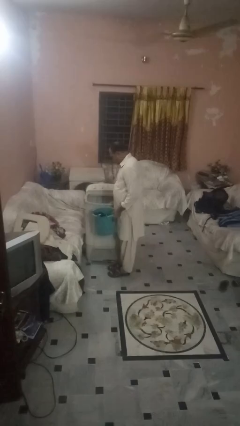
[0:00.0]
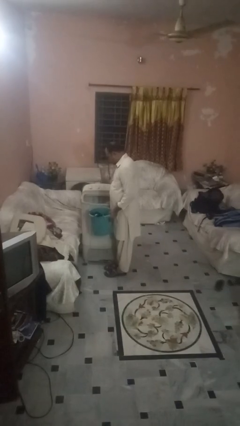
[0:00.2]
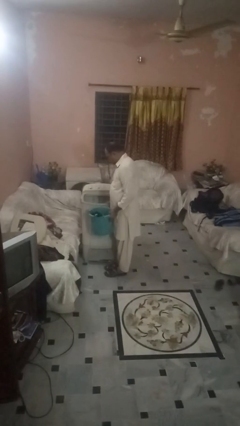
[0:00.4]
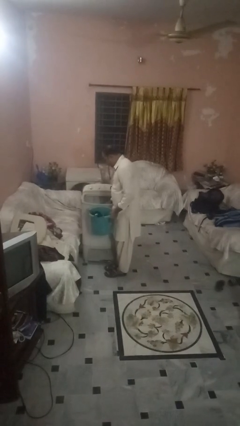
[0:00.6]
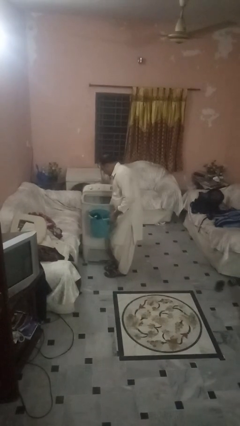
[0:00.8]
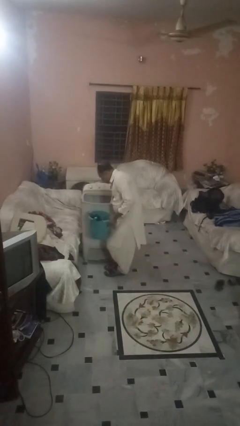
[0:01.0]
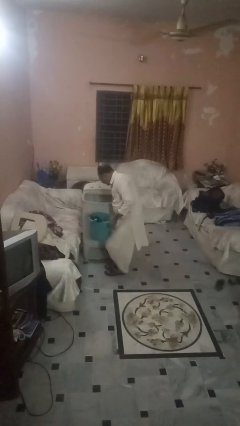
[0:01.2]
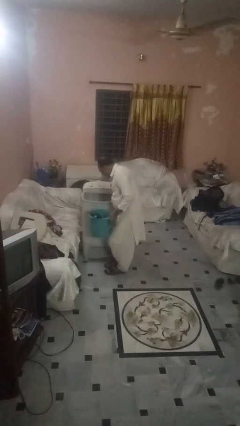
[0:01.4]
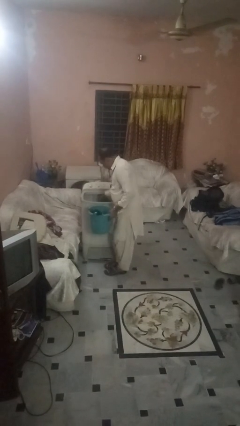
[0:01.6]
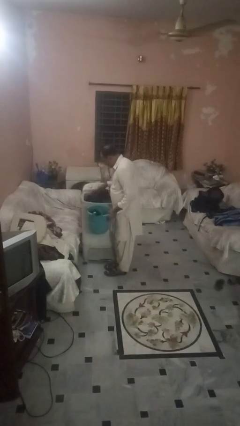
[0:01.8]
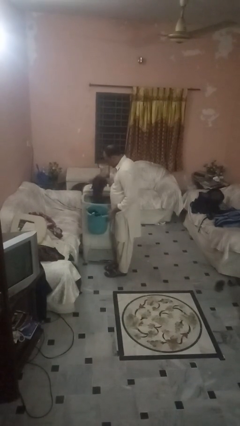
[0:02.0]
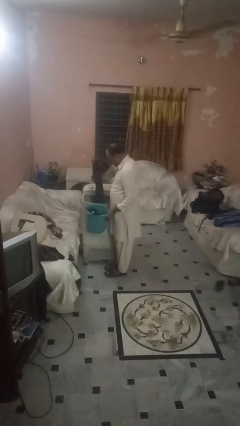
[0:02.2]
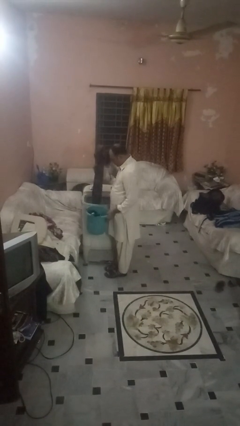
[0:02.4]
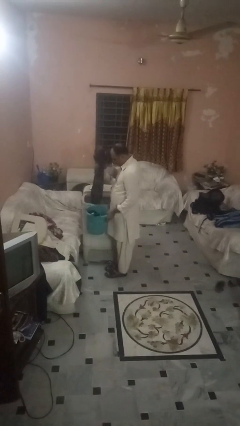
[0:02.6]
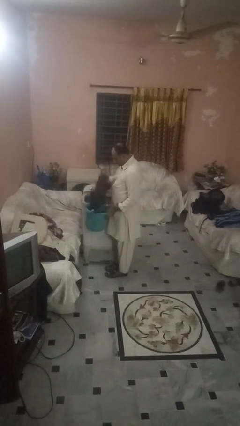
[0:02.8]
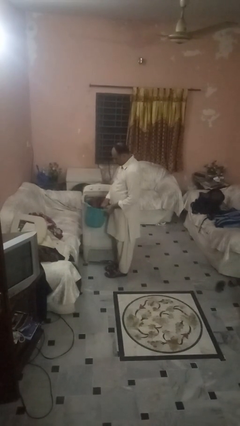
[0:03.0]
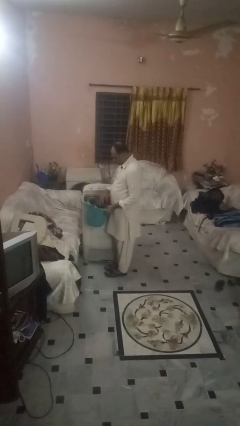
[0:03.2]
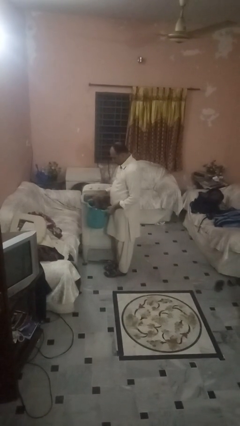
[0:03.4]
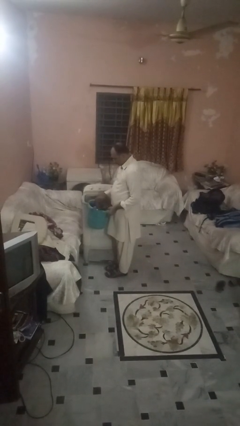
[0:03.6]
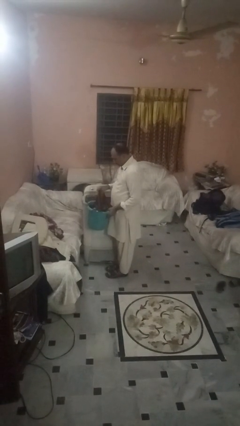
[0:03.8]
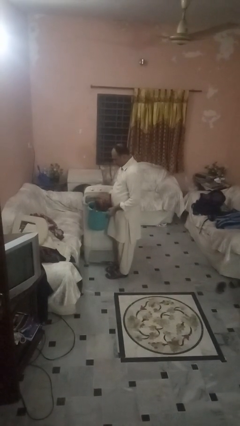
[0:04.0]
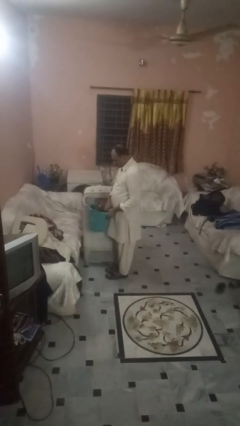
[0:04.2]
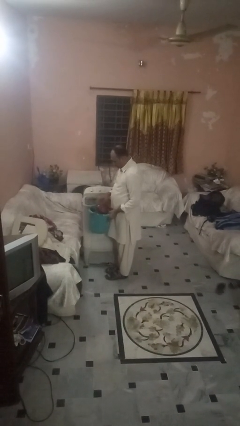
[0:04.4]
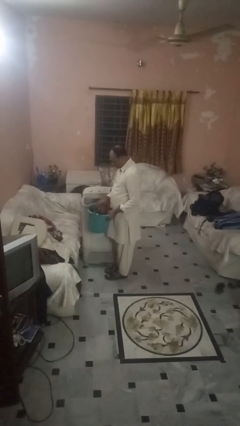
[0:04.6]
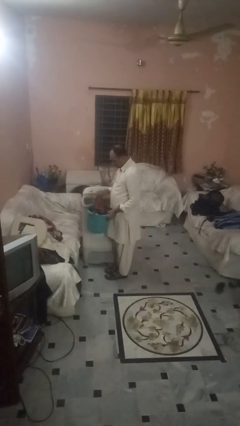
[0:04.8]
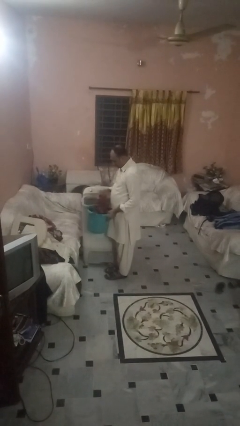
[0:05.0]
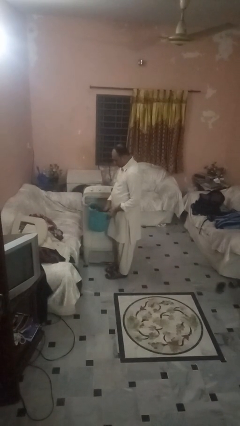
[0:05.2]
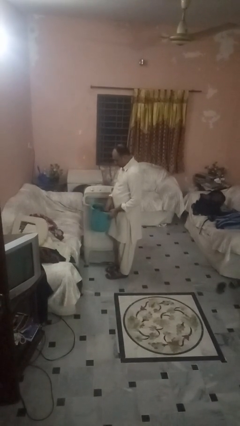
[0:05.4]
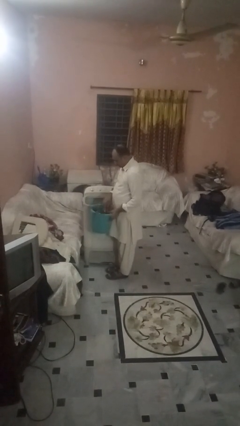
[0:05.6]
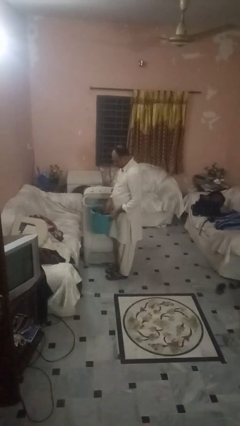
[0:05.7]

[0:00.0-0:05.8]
person unloads clotheswasher

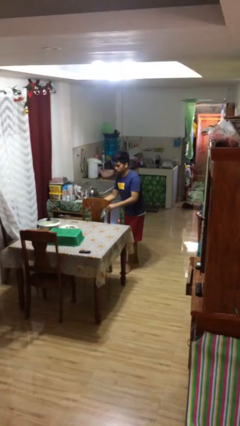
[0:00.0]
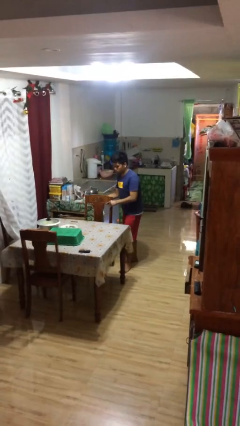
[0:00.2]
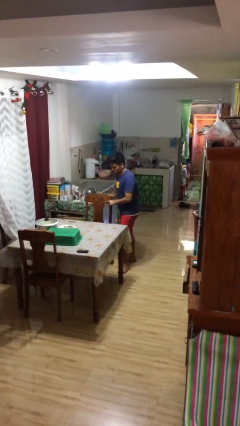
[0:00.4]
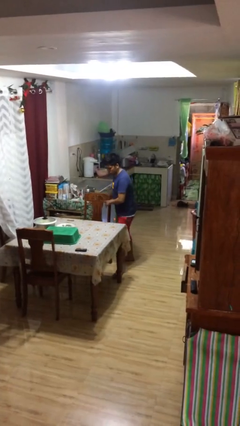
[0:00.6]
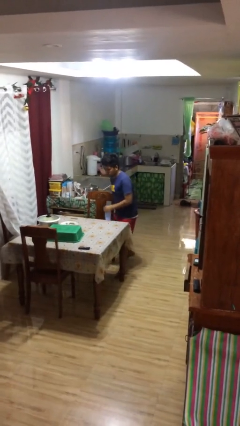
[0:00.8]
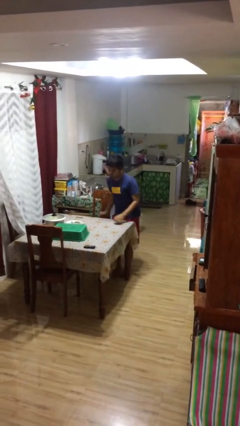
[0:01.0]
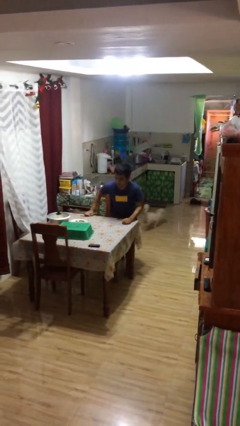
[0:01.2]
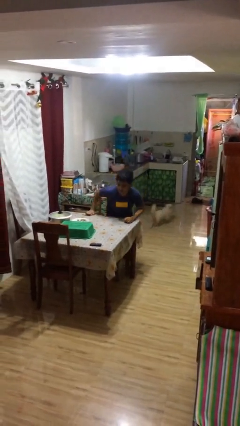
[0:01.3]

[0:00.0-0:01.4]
person stands up

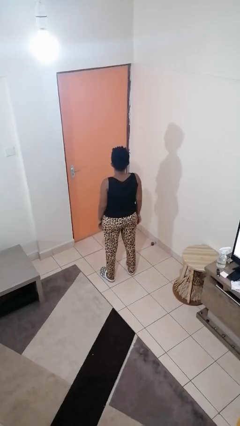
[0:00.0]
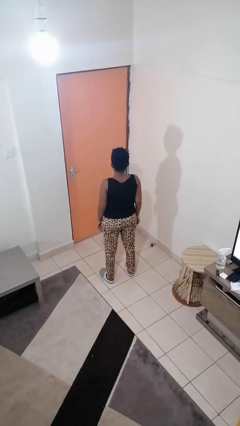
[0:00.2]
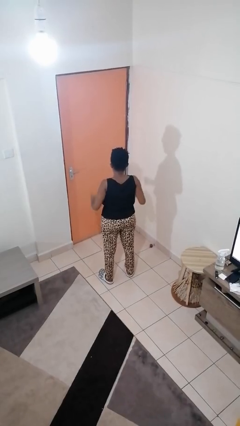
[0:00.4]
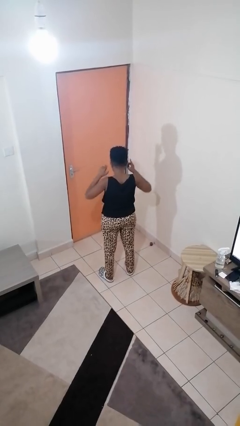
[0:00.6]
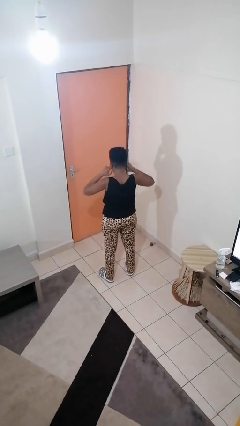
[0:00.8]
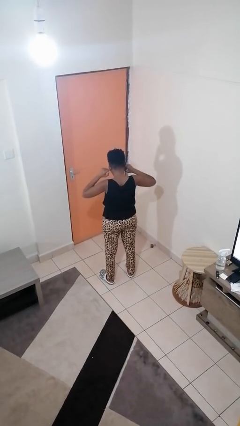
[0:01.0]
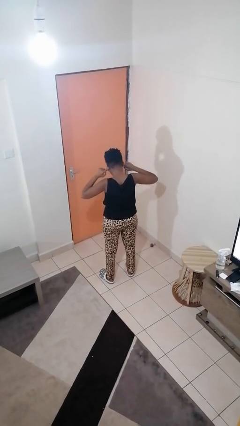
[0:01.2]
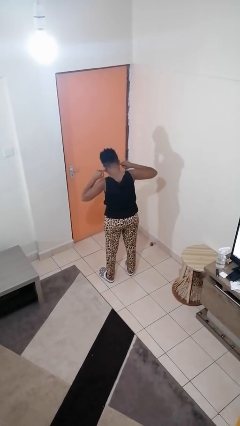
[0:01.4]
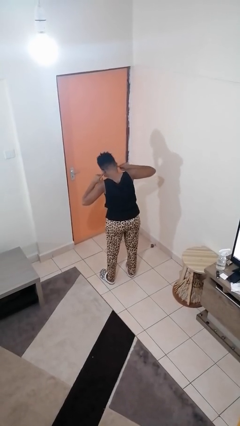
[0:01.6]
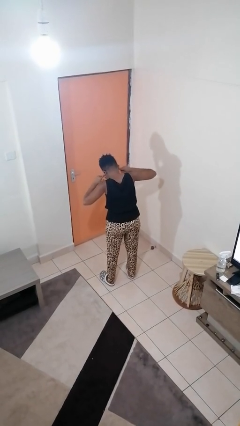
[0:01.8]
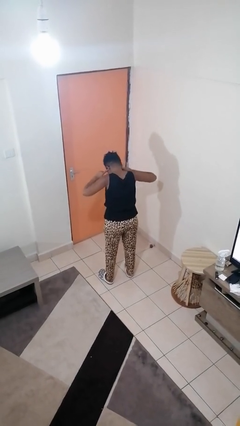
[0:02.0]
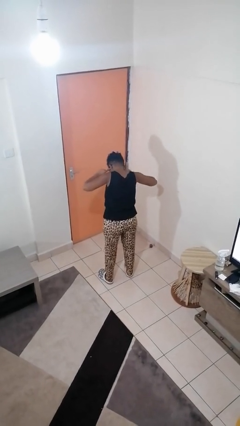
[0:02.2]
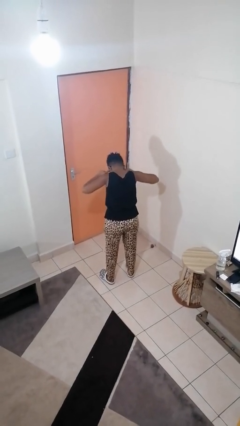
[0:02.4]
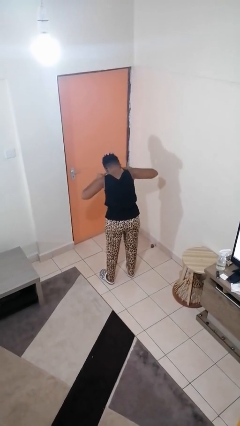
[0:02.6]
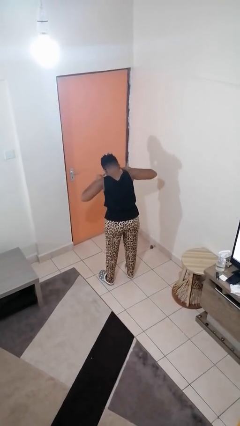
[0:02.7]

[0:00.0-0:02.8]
person puts fingers in ear

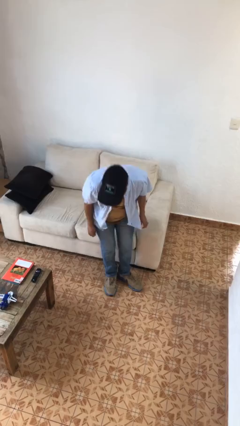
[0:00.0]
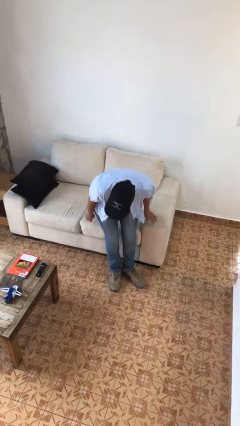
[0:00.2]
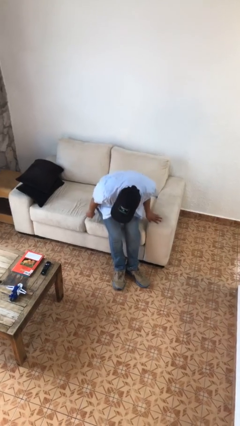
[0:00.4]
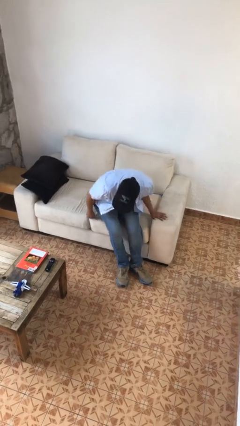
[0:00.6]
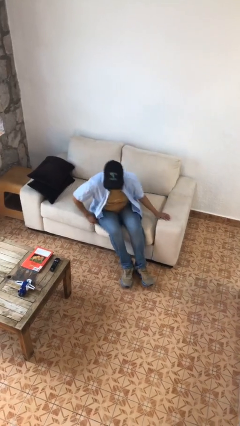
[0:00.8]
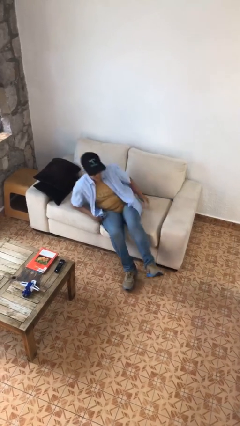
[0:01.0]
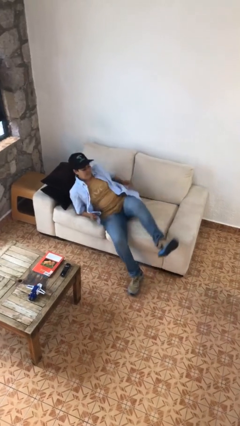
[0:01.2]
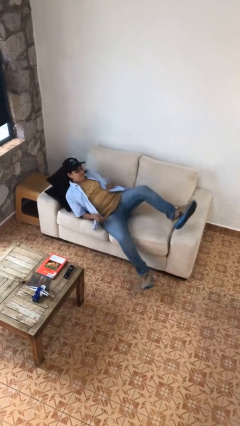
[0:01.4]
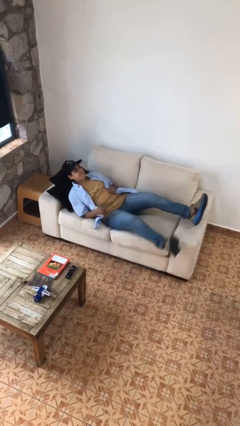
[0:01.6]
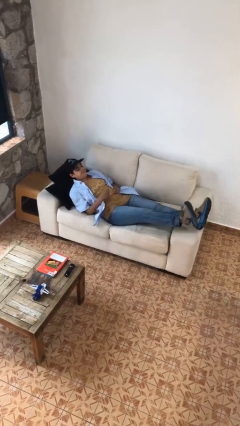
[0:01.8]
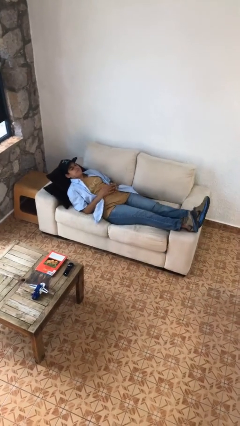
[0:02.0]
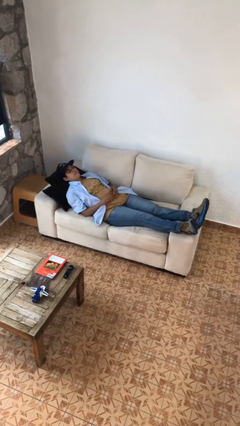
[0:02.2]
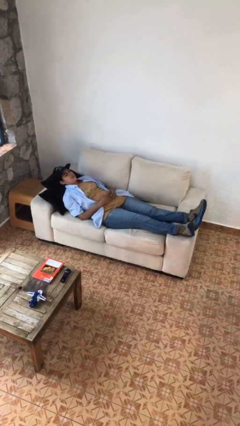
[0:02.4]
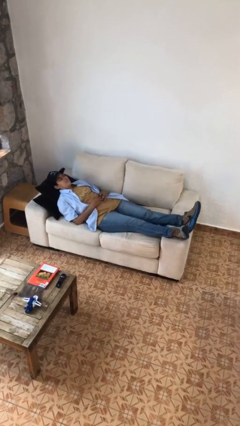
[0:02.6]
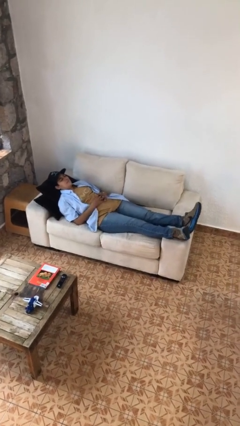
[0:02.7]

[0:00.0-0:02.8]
person lies down on couch

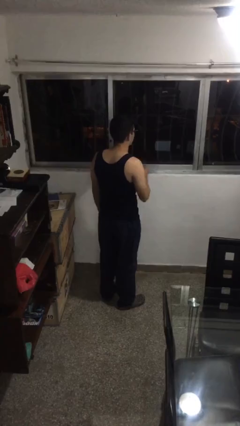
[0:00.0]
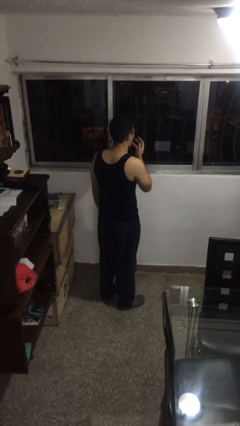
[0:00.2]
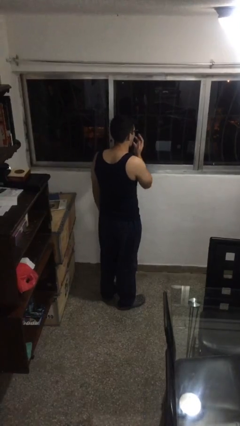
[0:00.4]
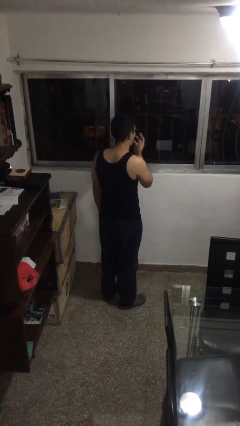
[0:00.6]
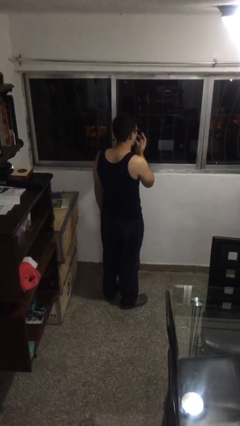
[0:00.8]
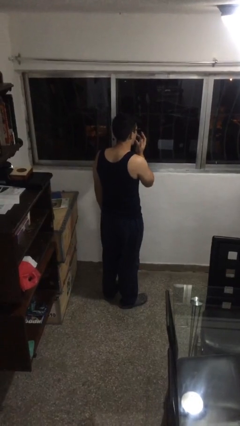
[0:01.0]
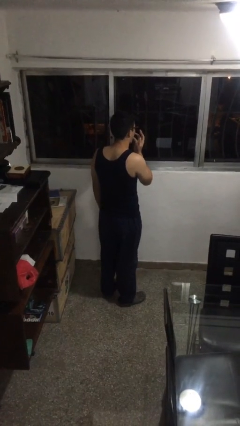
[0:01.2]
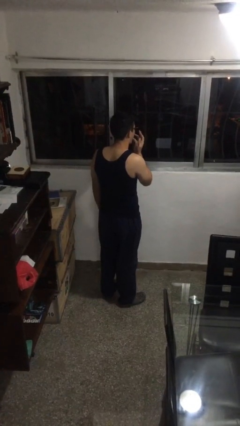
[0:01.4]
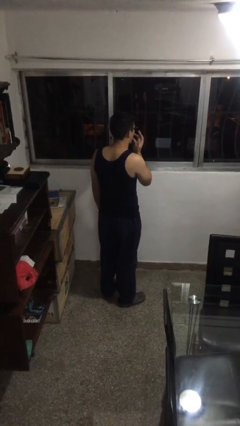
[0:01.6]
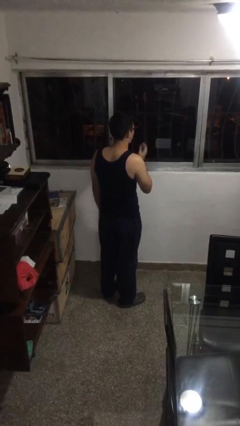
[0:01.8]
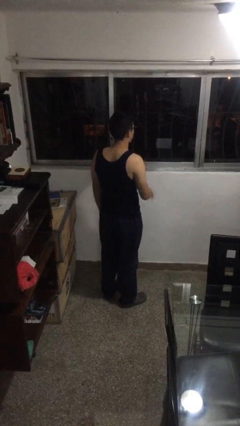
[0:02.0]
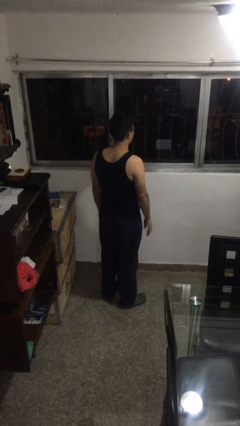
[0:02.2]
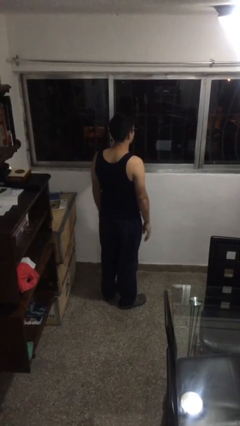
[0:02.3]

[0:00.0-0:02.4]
person licks fingers

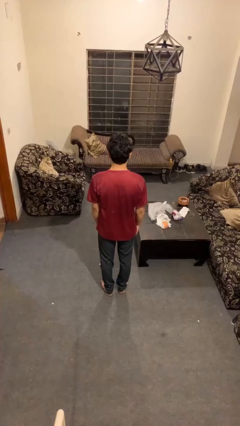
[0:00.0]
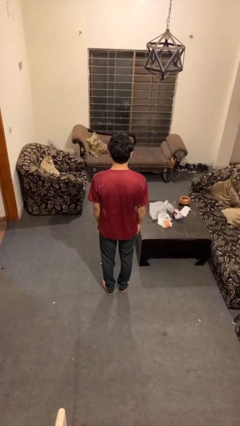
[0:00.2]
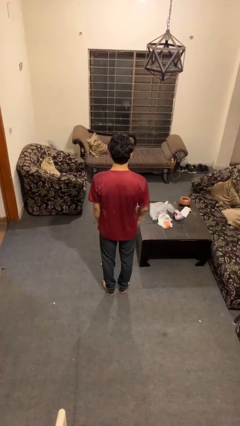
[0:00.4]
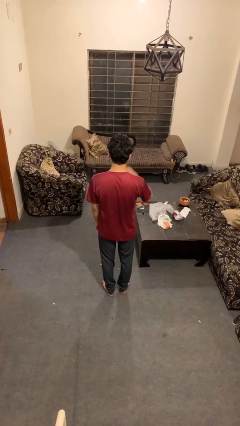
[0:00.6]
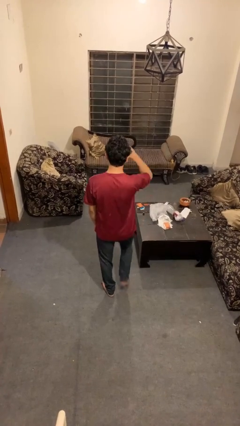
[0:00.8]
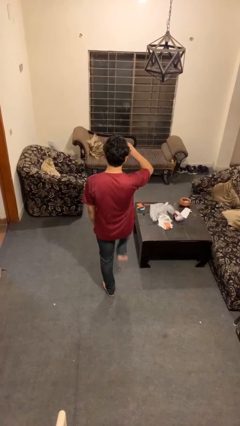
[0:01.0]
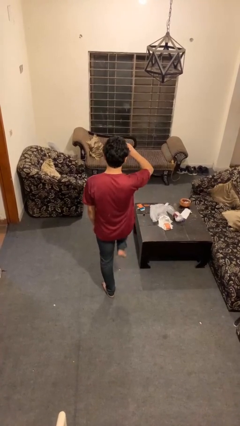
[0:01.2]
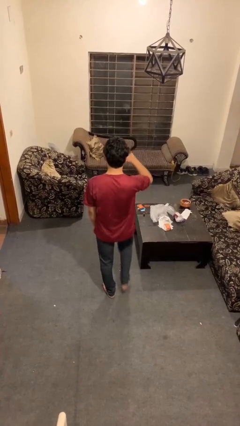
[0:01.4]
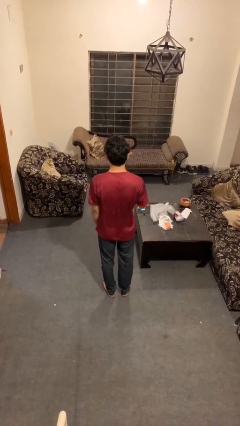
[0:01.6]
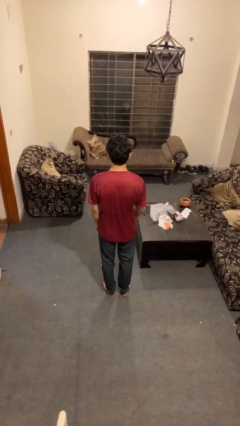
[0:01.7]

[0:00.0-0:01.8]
person salutes

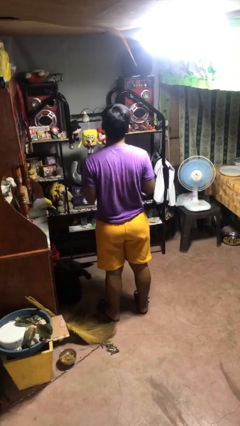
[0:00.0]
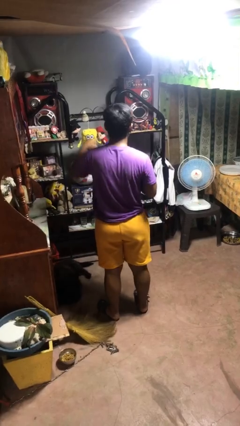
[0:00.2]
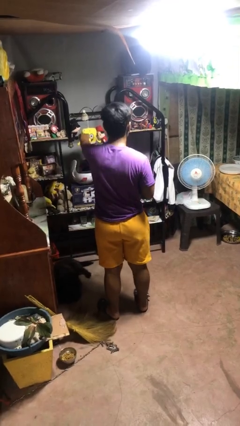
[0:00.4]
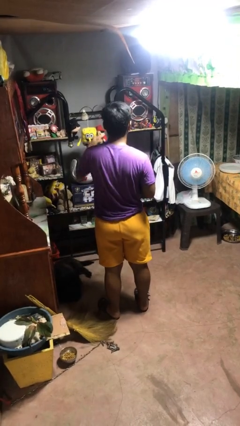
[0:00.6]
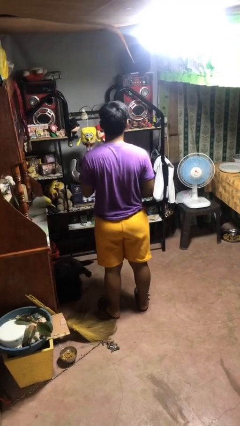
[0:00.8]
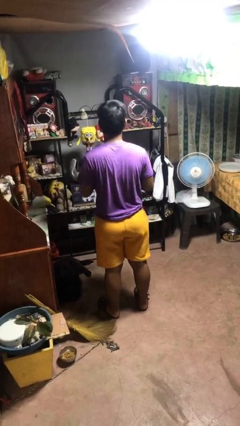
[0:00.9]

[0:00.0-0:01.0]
person punches
